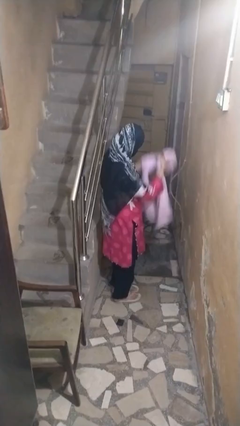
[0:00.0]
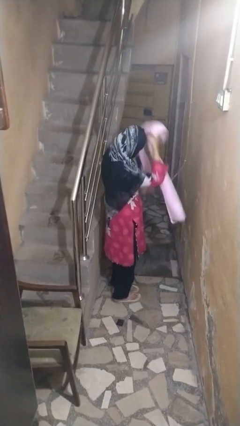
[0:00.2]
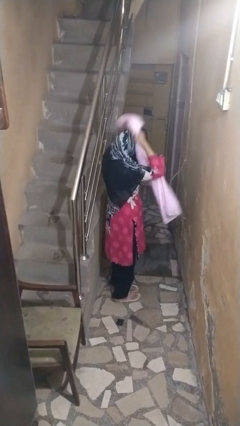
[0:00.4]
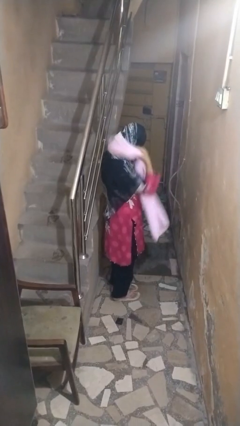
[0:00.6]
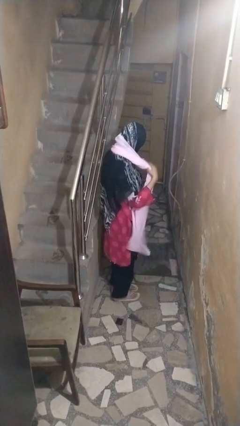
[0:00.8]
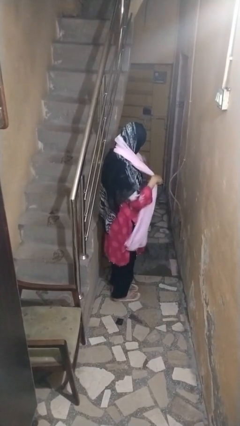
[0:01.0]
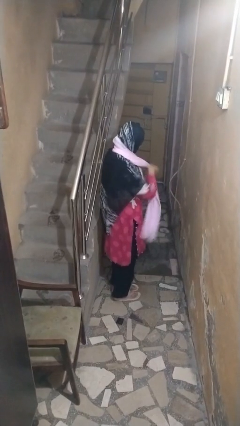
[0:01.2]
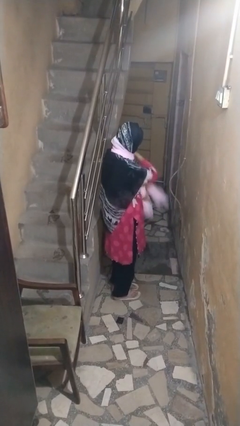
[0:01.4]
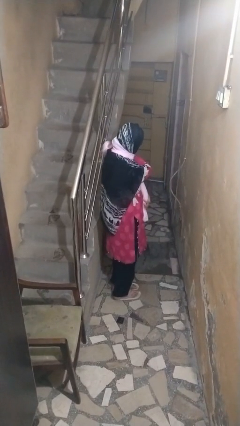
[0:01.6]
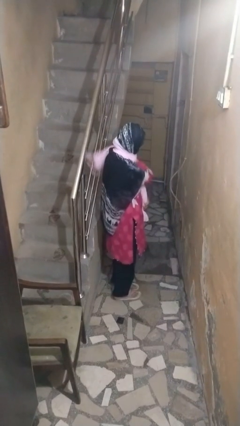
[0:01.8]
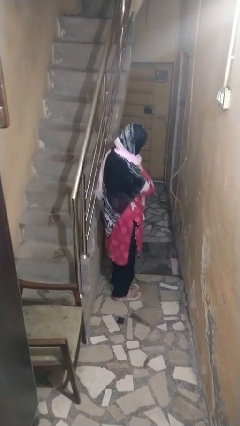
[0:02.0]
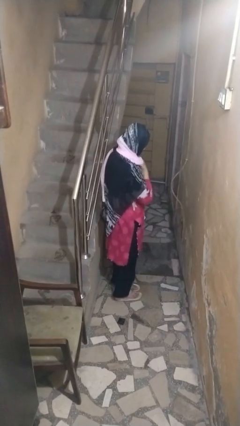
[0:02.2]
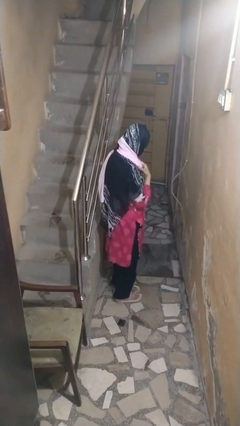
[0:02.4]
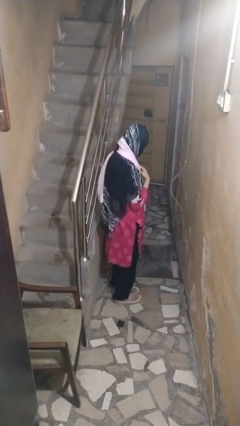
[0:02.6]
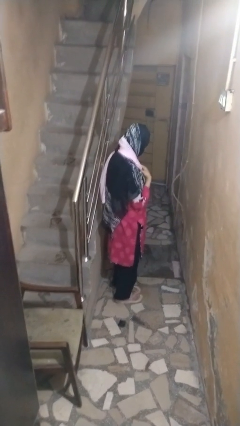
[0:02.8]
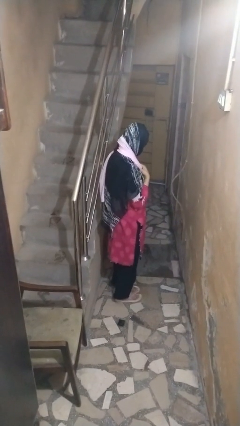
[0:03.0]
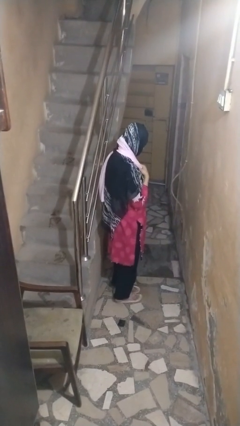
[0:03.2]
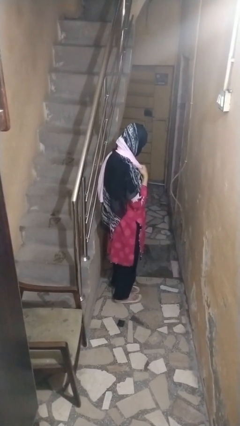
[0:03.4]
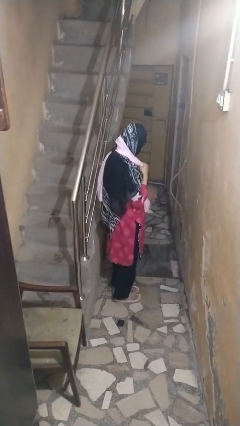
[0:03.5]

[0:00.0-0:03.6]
person puts on scarf

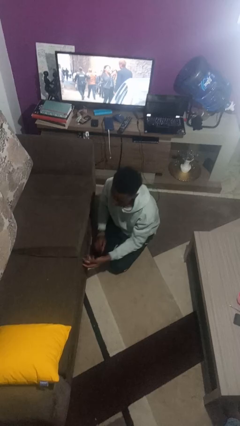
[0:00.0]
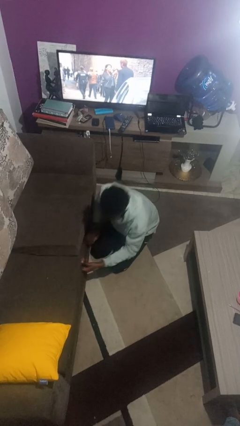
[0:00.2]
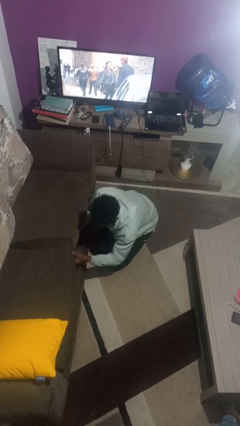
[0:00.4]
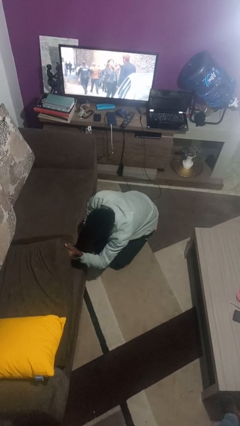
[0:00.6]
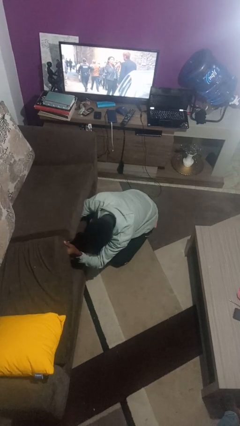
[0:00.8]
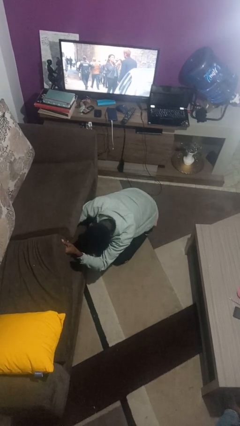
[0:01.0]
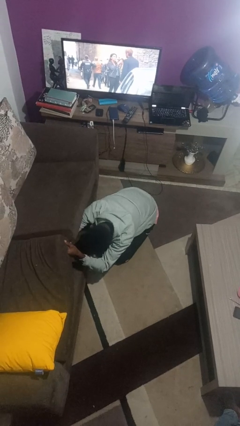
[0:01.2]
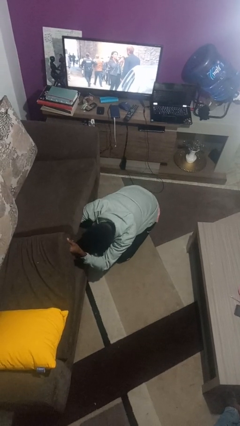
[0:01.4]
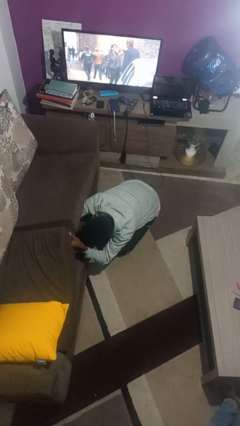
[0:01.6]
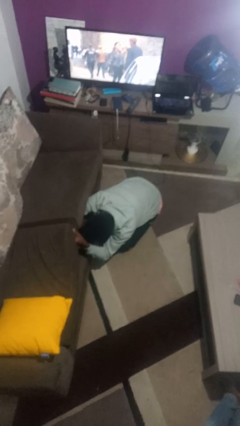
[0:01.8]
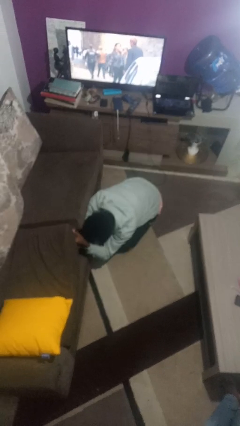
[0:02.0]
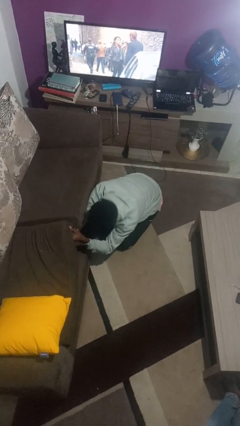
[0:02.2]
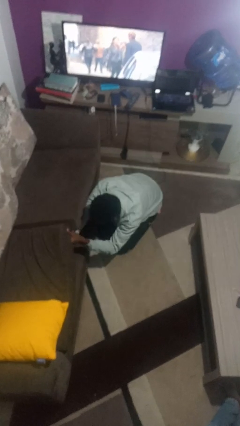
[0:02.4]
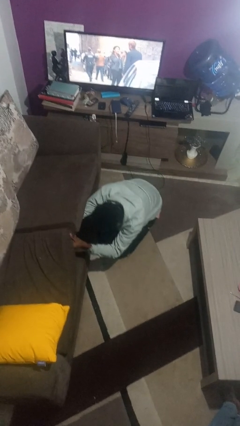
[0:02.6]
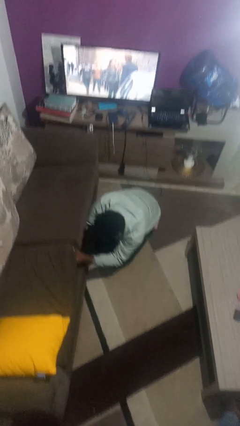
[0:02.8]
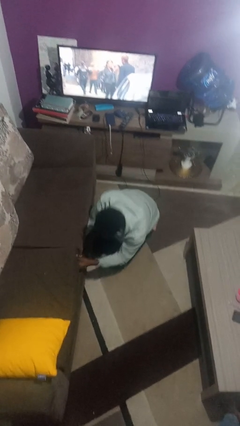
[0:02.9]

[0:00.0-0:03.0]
person searches under couch

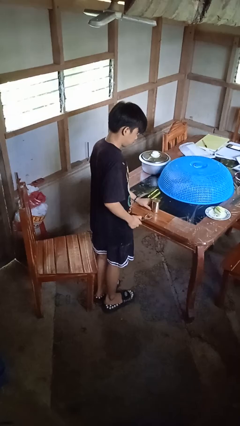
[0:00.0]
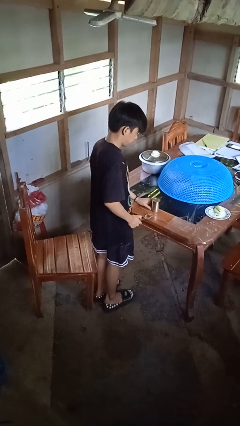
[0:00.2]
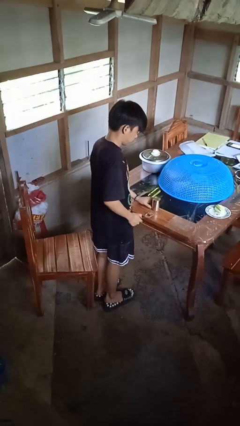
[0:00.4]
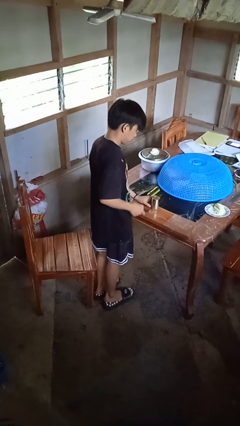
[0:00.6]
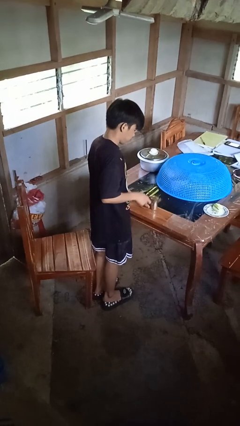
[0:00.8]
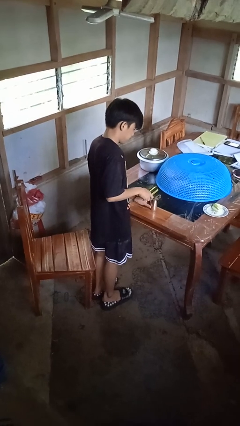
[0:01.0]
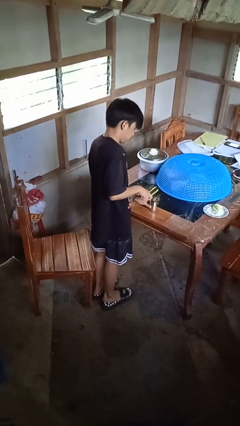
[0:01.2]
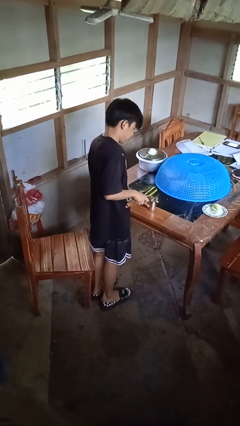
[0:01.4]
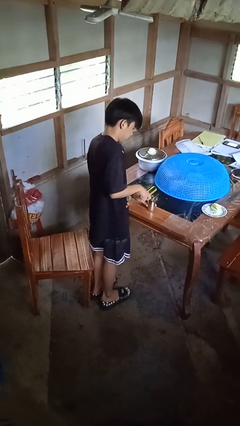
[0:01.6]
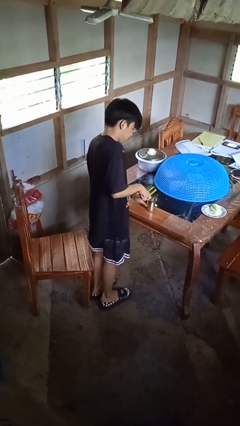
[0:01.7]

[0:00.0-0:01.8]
person opens can with can opener

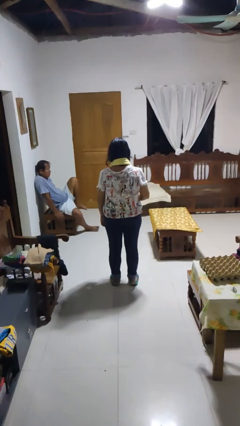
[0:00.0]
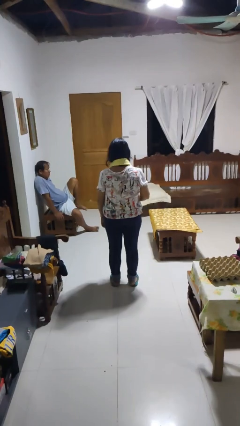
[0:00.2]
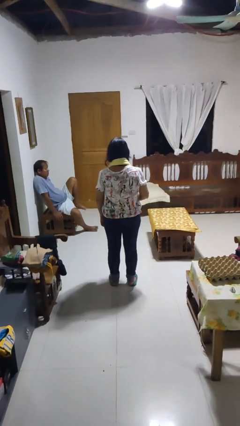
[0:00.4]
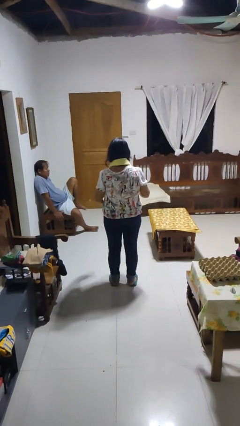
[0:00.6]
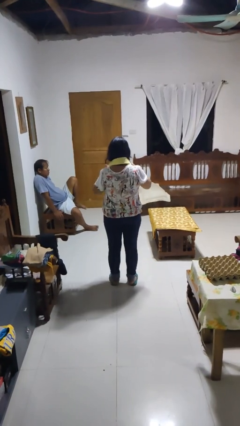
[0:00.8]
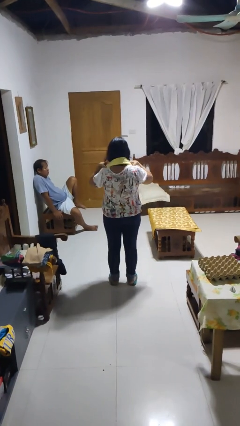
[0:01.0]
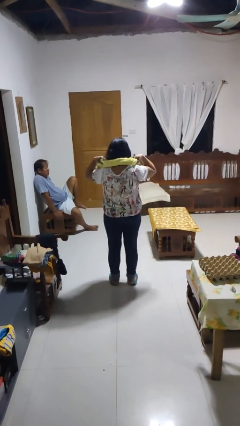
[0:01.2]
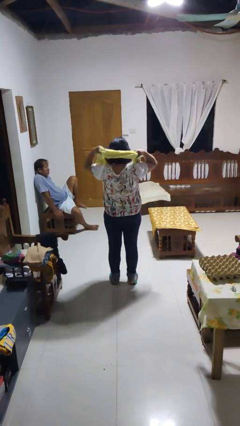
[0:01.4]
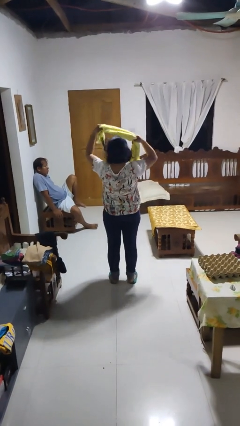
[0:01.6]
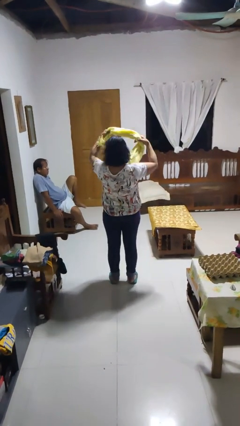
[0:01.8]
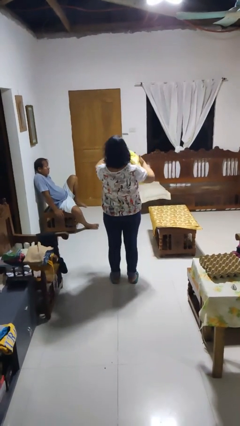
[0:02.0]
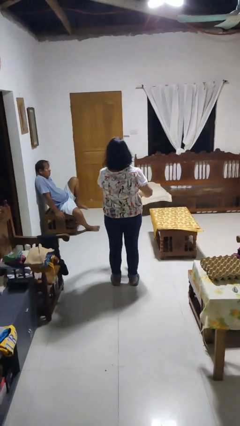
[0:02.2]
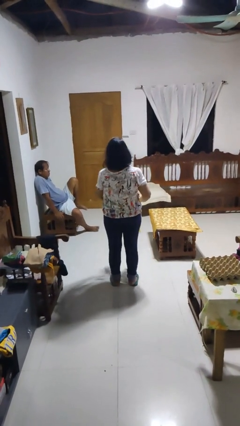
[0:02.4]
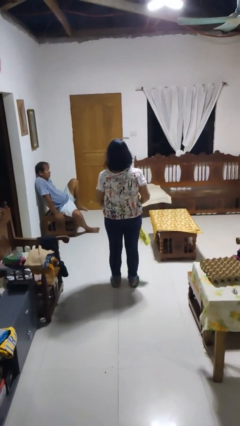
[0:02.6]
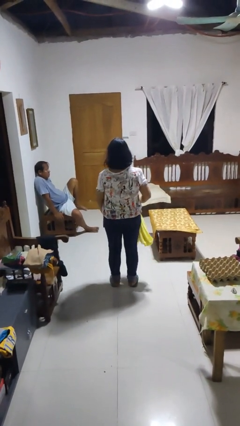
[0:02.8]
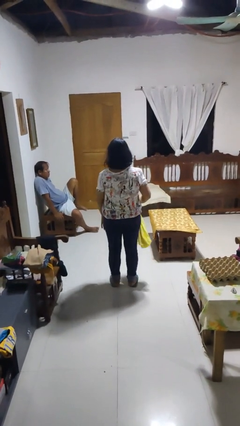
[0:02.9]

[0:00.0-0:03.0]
person takes off scarf

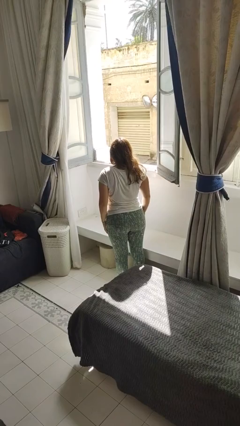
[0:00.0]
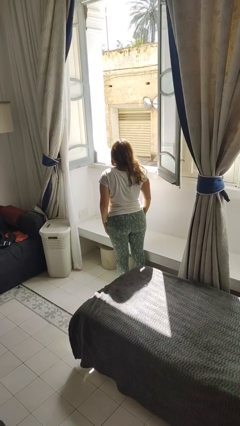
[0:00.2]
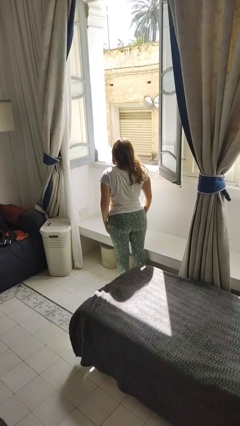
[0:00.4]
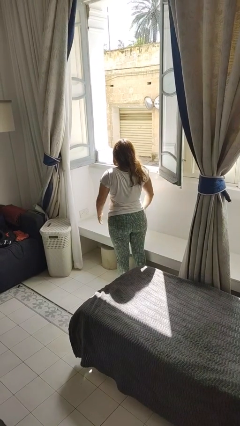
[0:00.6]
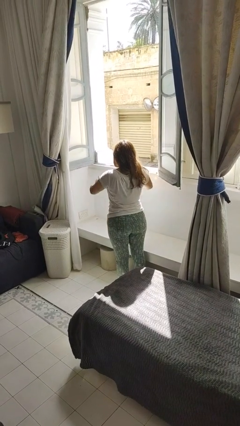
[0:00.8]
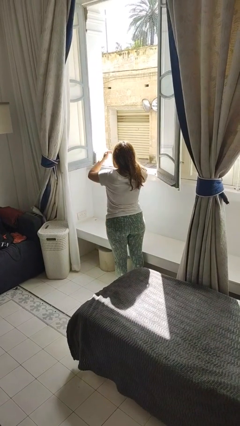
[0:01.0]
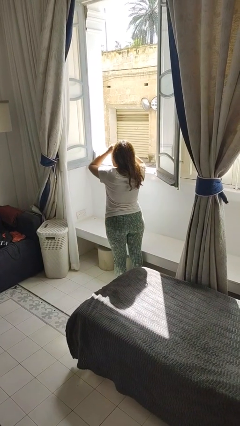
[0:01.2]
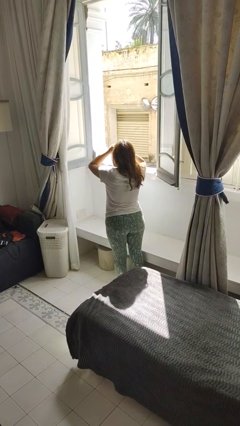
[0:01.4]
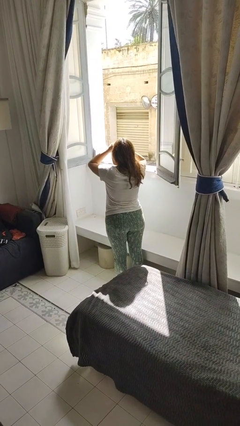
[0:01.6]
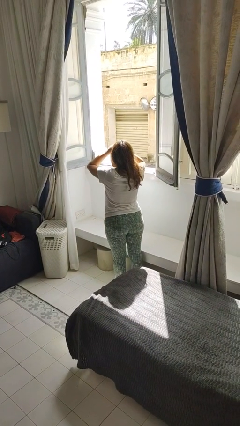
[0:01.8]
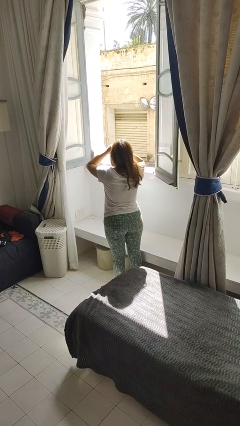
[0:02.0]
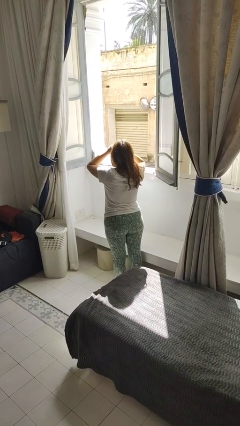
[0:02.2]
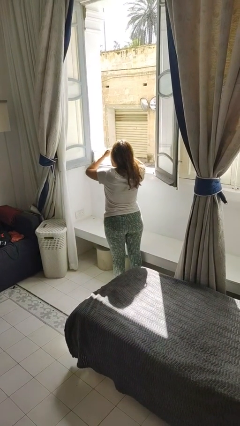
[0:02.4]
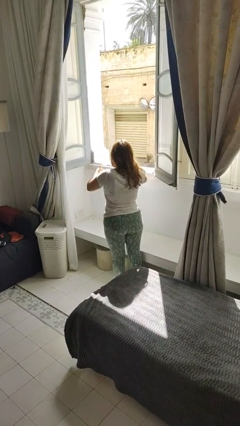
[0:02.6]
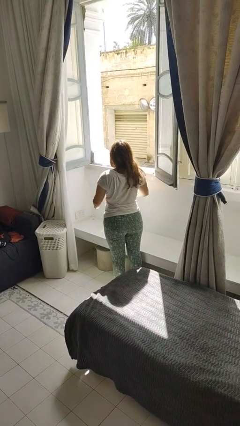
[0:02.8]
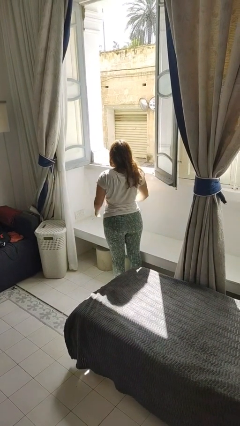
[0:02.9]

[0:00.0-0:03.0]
person shades eyes

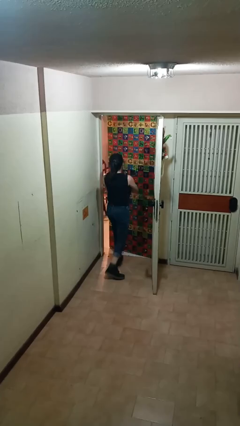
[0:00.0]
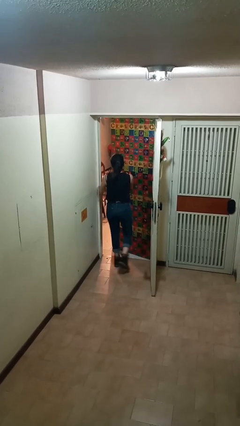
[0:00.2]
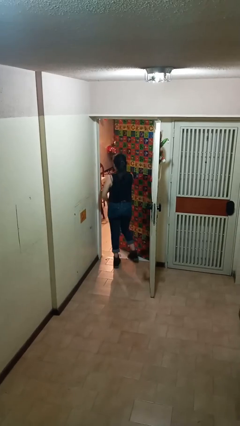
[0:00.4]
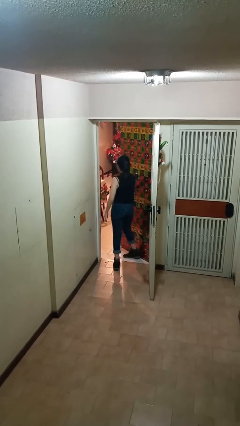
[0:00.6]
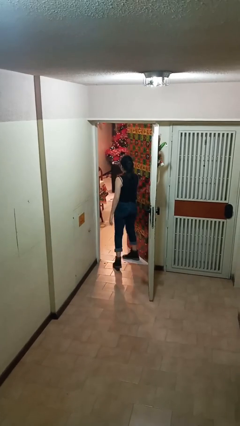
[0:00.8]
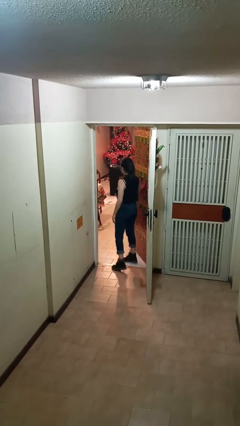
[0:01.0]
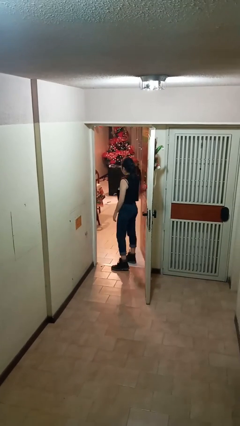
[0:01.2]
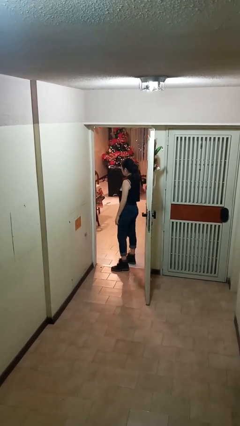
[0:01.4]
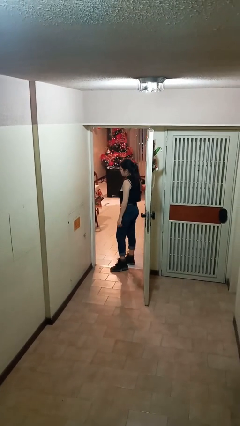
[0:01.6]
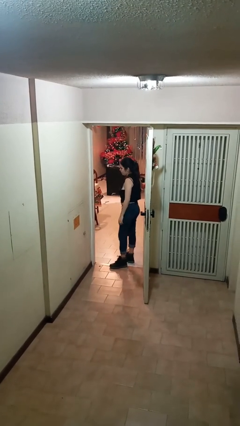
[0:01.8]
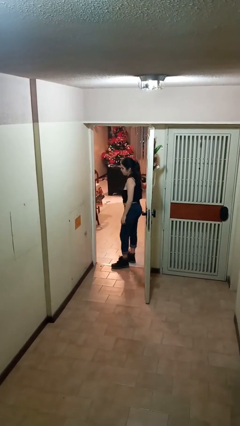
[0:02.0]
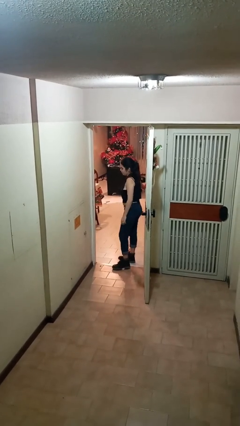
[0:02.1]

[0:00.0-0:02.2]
person opens facility door

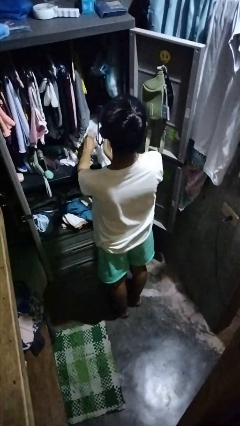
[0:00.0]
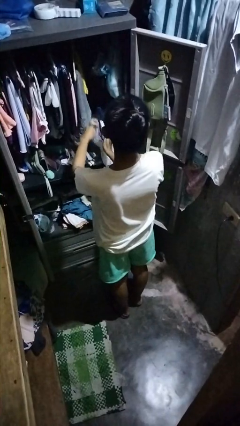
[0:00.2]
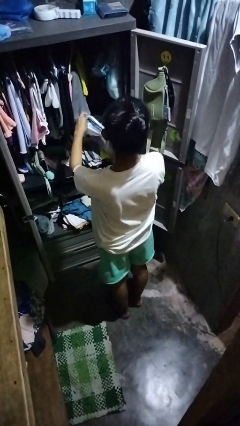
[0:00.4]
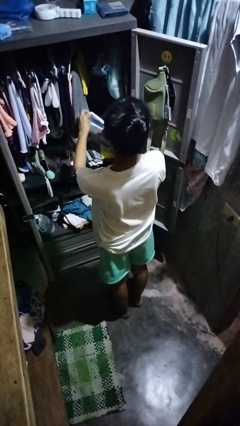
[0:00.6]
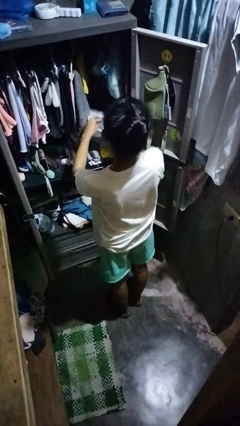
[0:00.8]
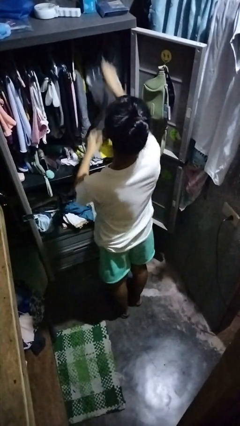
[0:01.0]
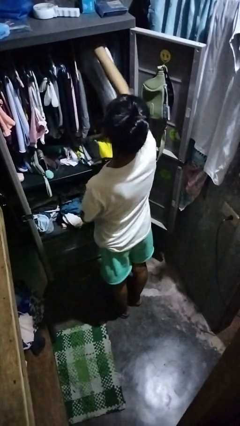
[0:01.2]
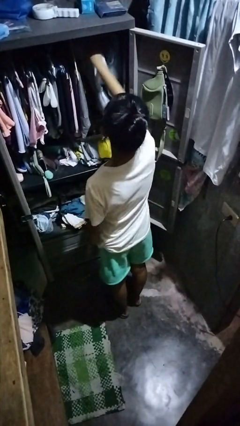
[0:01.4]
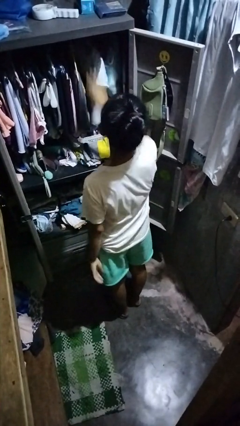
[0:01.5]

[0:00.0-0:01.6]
person puts clothes into closet
